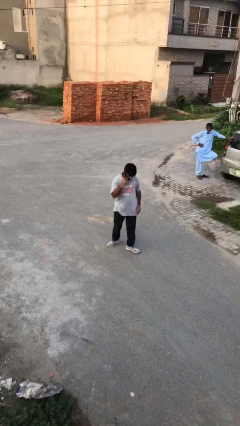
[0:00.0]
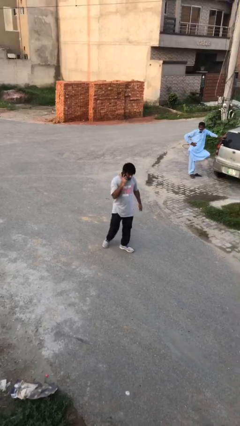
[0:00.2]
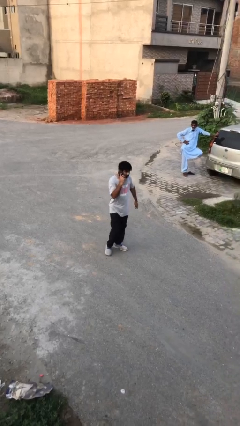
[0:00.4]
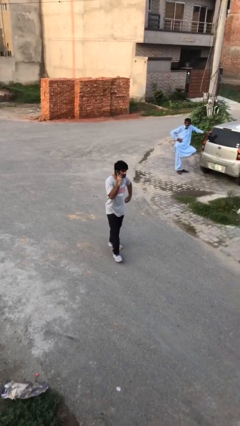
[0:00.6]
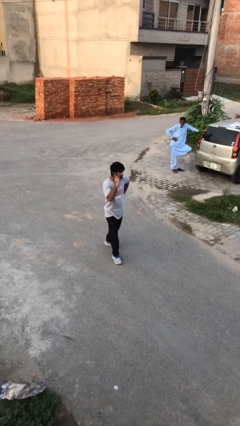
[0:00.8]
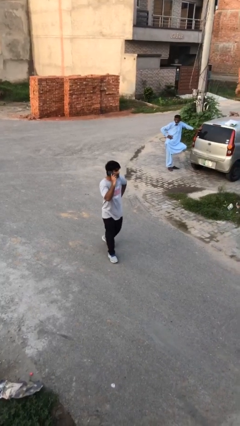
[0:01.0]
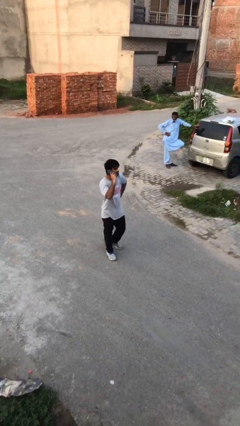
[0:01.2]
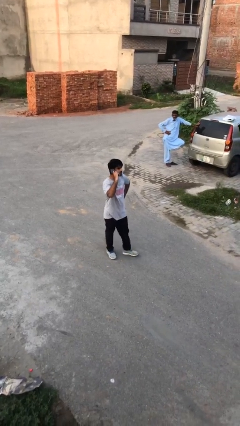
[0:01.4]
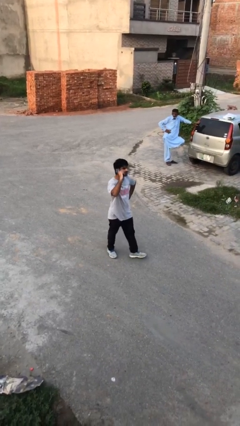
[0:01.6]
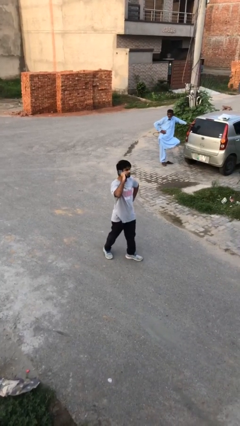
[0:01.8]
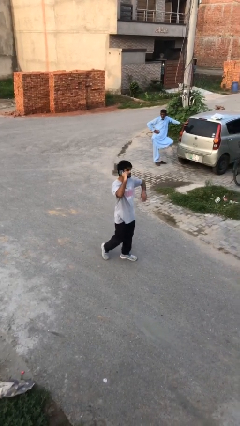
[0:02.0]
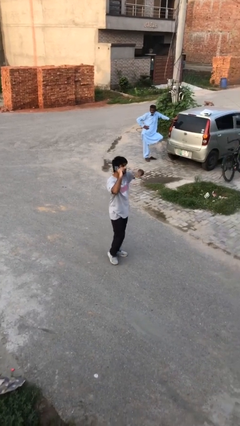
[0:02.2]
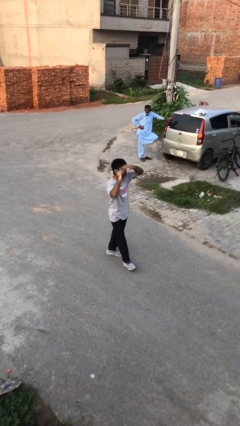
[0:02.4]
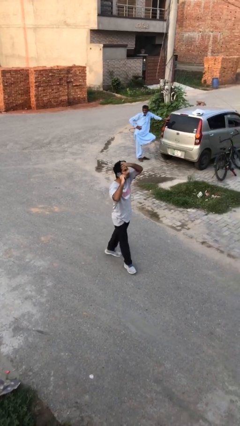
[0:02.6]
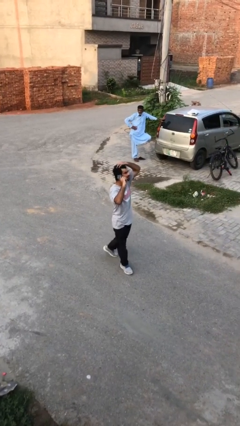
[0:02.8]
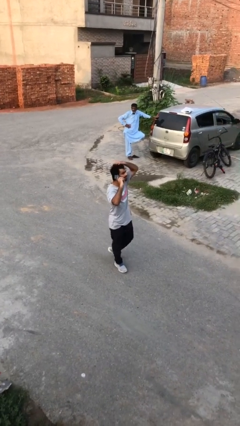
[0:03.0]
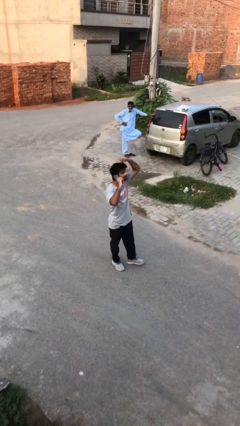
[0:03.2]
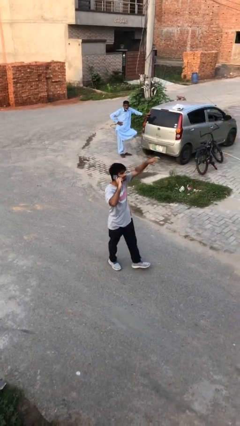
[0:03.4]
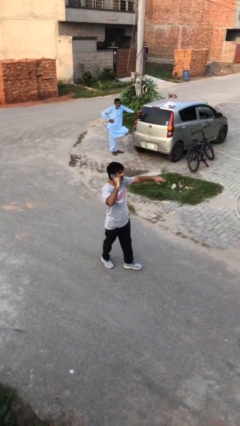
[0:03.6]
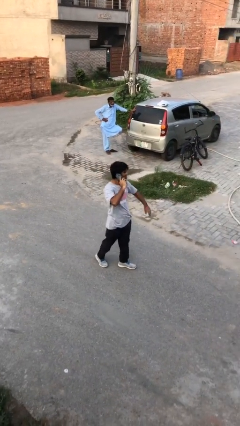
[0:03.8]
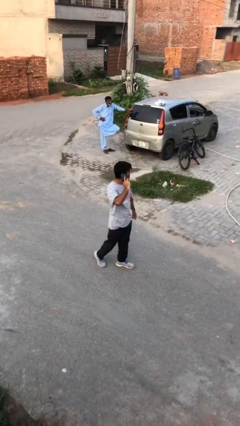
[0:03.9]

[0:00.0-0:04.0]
person talks on phone

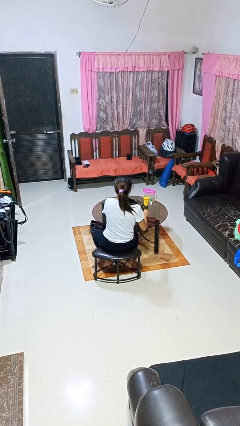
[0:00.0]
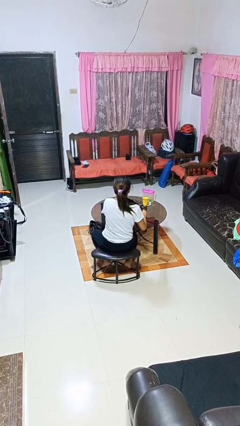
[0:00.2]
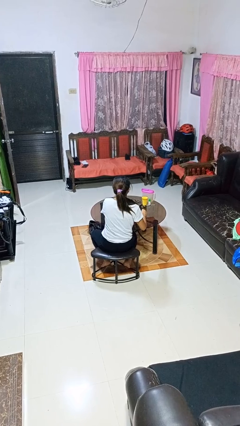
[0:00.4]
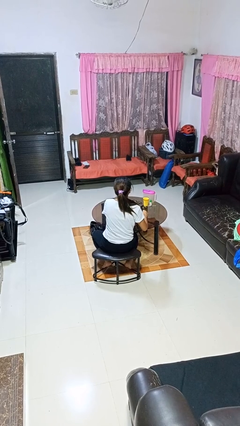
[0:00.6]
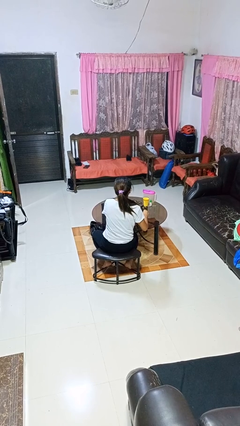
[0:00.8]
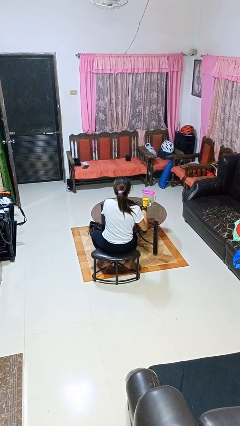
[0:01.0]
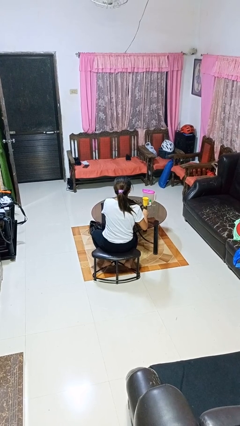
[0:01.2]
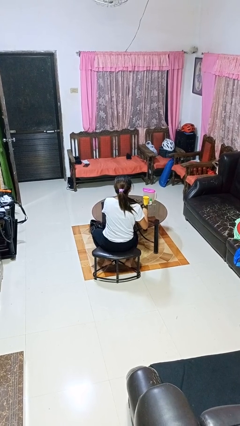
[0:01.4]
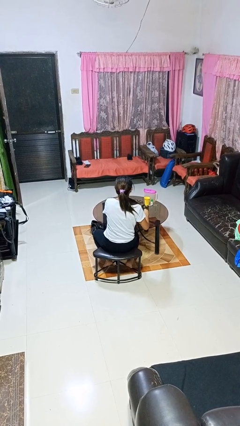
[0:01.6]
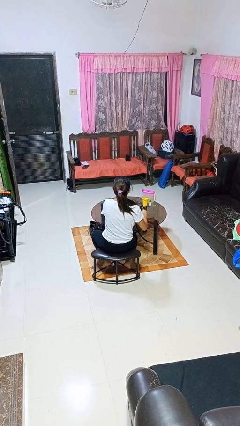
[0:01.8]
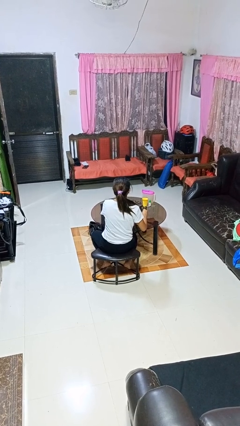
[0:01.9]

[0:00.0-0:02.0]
person stirs mug

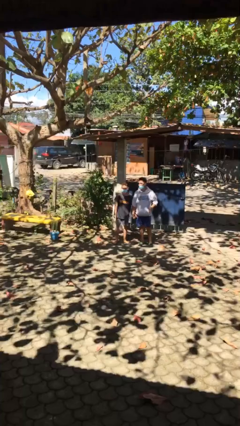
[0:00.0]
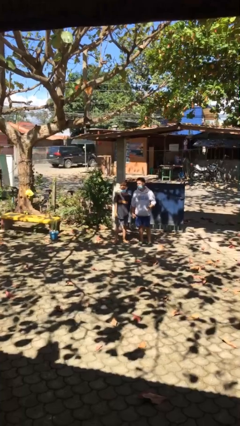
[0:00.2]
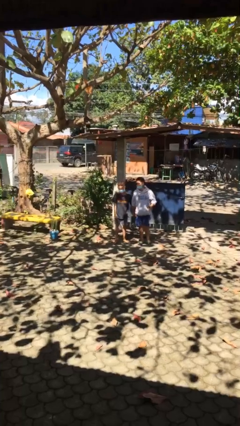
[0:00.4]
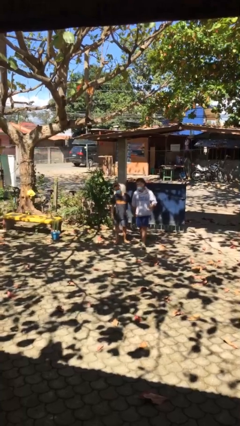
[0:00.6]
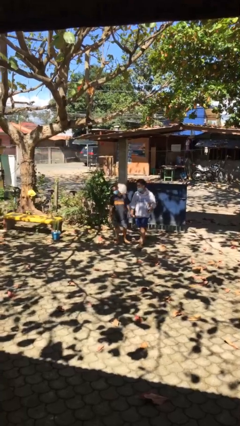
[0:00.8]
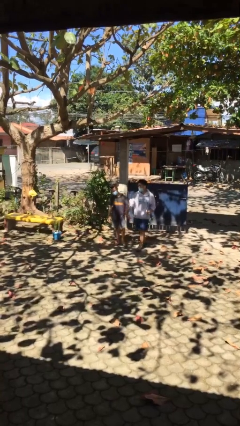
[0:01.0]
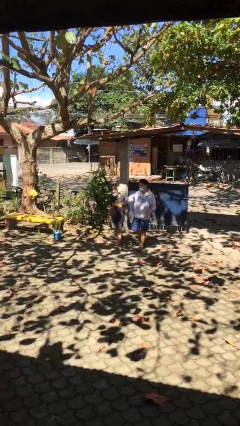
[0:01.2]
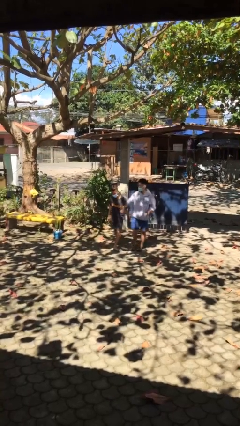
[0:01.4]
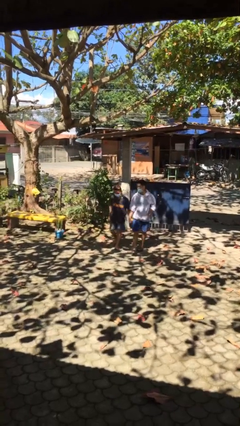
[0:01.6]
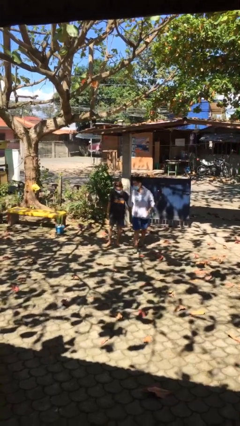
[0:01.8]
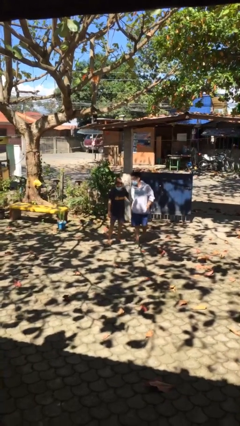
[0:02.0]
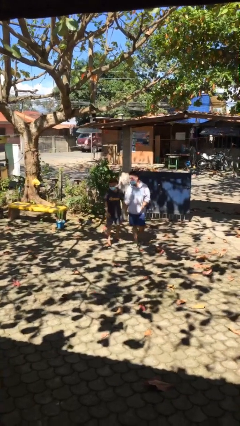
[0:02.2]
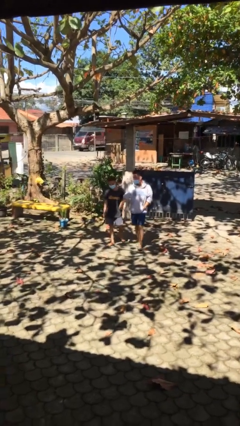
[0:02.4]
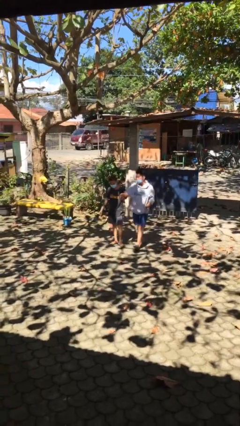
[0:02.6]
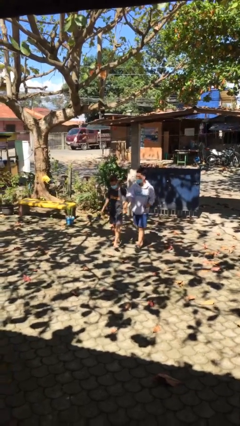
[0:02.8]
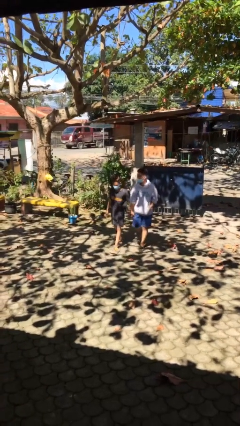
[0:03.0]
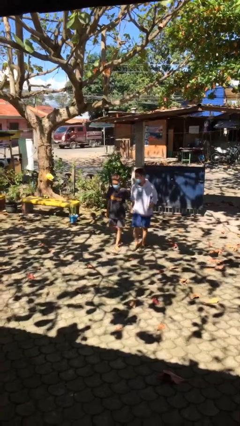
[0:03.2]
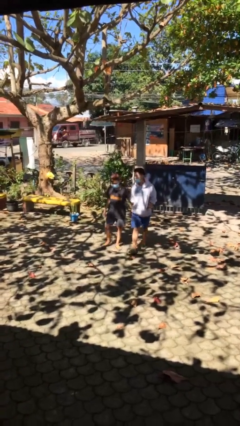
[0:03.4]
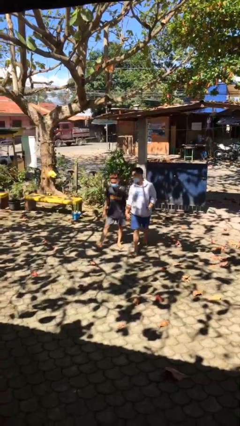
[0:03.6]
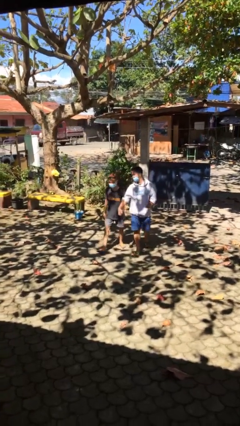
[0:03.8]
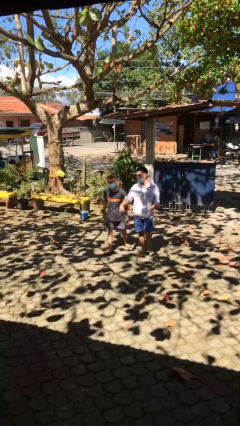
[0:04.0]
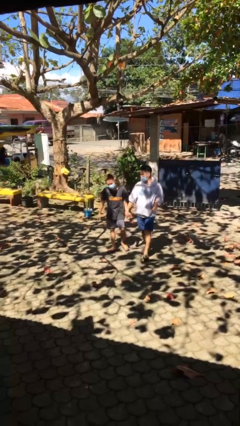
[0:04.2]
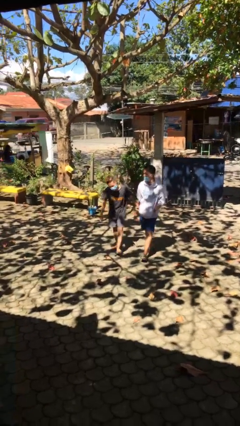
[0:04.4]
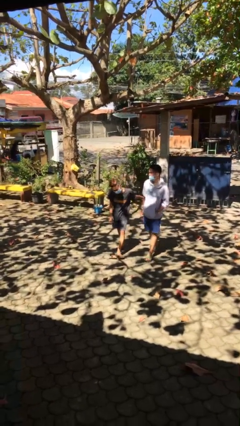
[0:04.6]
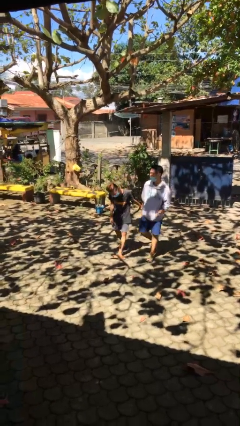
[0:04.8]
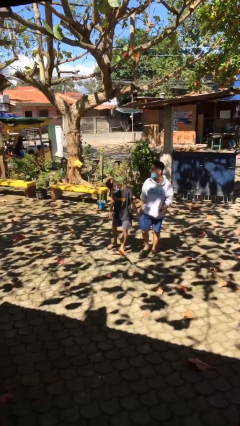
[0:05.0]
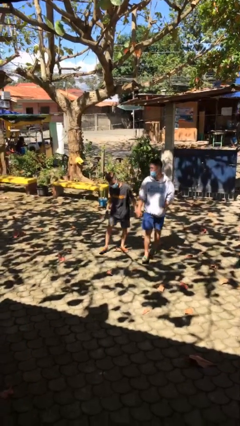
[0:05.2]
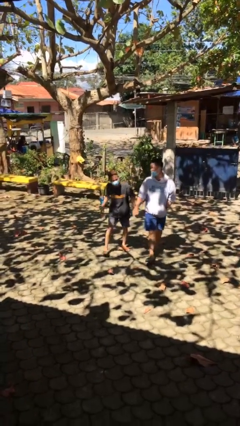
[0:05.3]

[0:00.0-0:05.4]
person holds hand

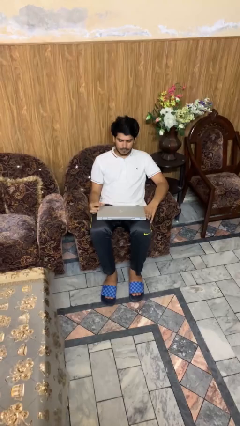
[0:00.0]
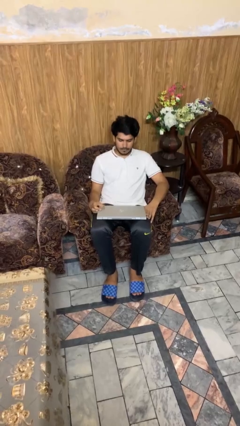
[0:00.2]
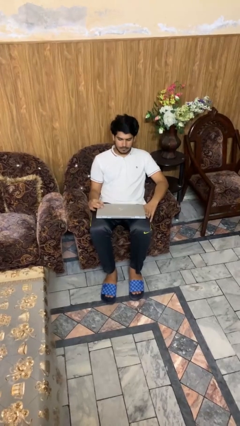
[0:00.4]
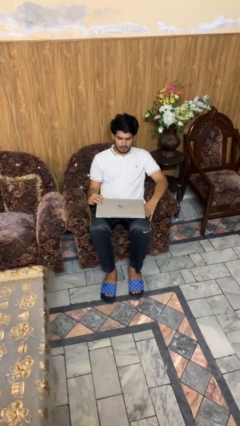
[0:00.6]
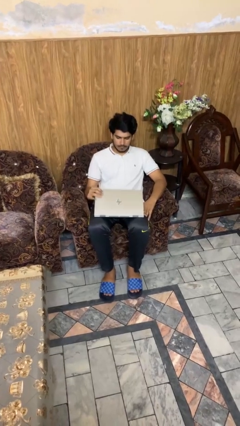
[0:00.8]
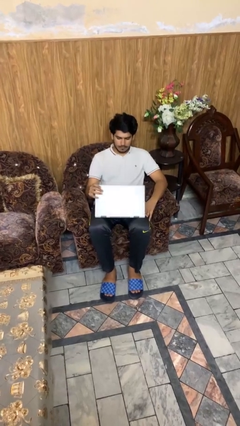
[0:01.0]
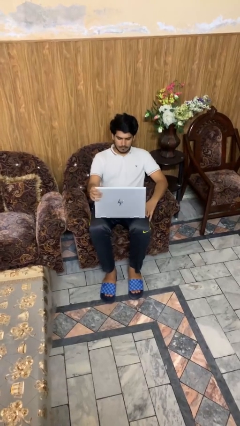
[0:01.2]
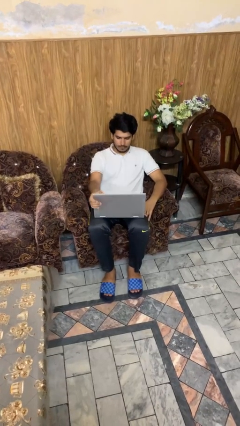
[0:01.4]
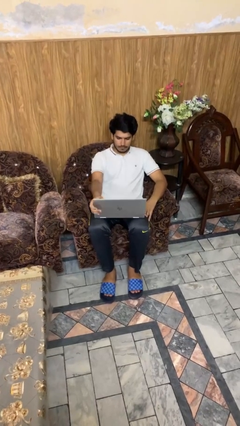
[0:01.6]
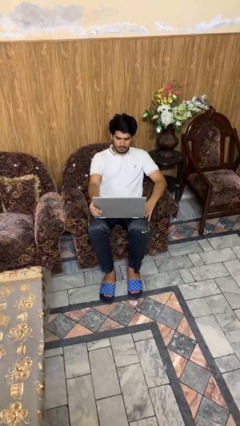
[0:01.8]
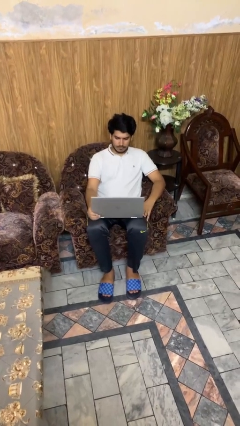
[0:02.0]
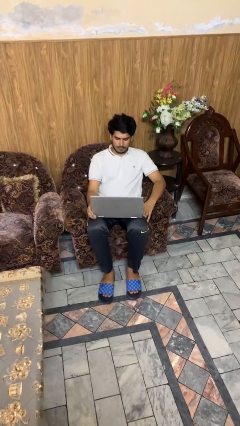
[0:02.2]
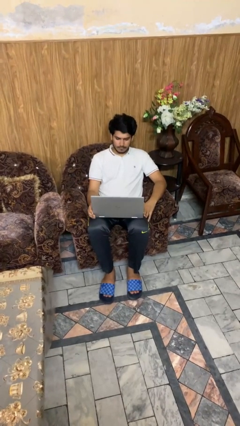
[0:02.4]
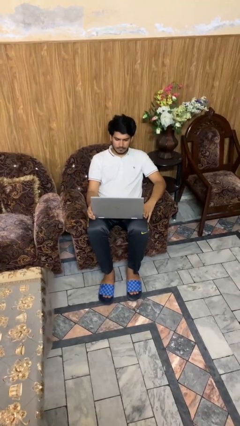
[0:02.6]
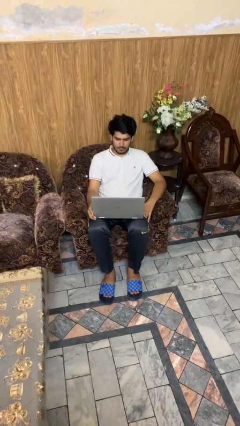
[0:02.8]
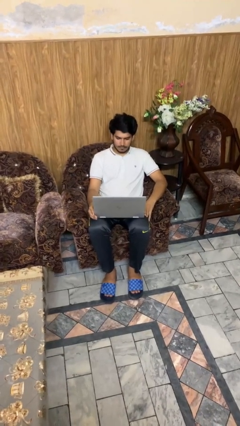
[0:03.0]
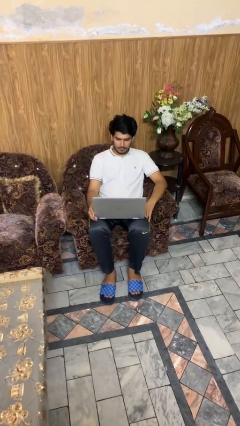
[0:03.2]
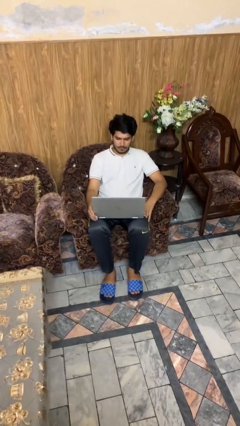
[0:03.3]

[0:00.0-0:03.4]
person opens laptop

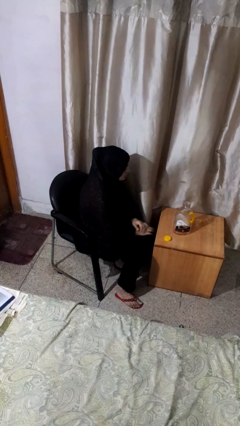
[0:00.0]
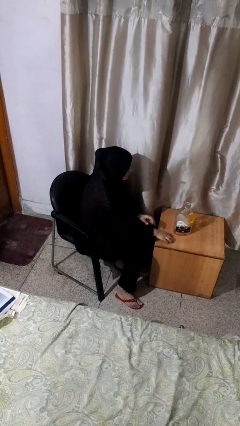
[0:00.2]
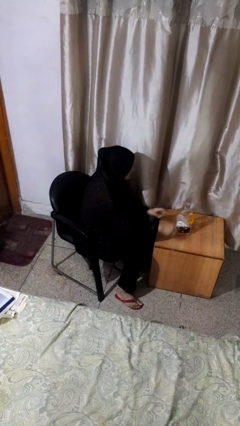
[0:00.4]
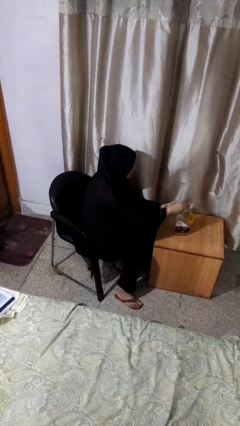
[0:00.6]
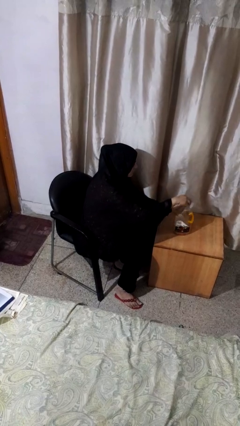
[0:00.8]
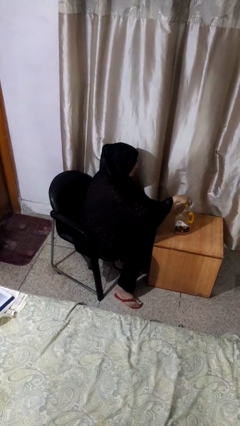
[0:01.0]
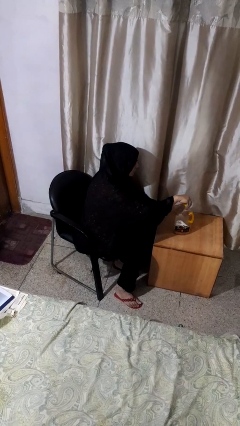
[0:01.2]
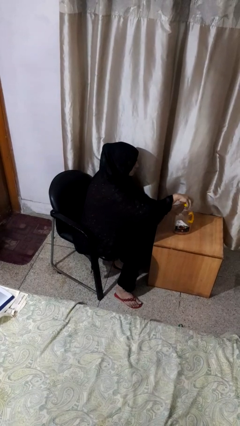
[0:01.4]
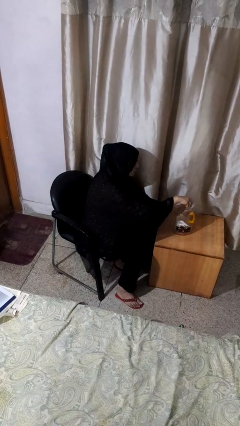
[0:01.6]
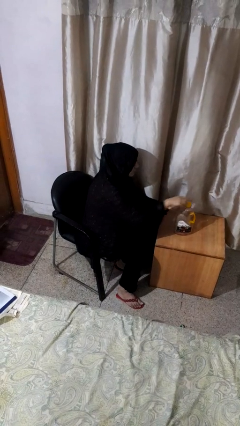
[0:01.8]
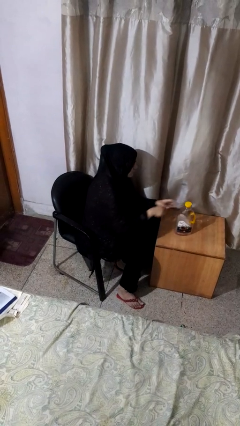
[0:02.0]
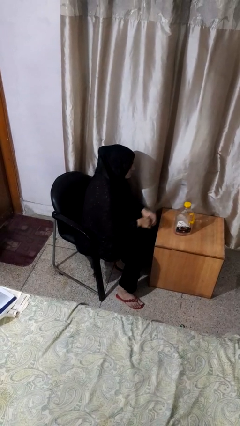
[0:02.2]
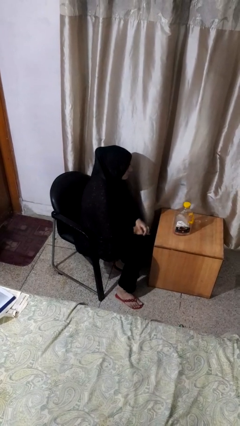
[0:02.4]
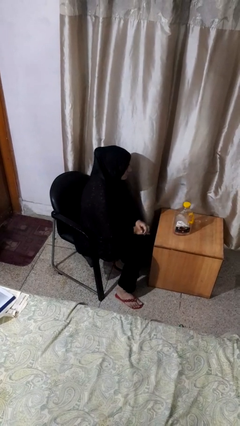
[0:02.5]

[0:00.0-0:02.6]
person screws lid to bottle

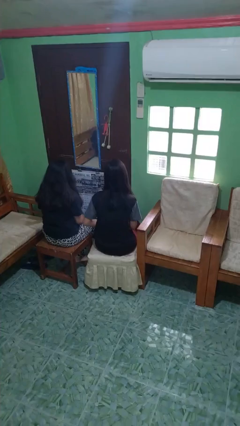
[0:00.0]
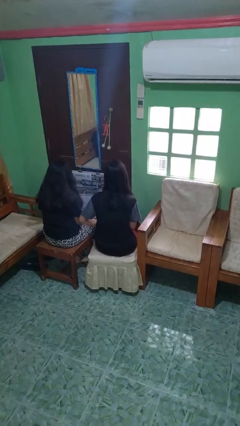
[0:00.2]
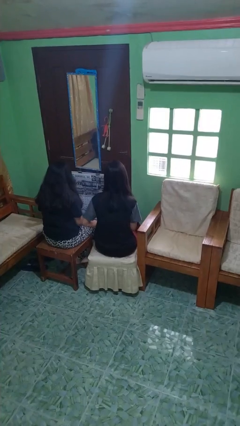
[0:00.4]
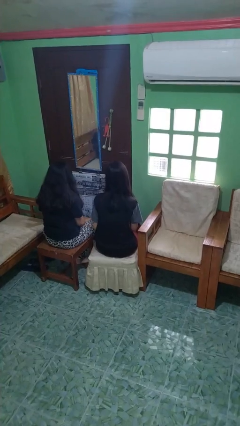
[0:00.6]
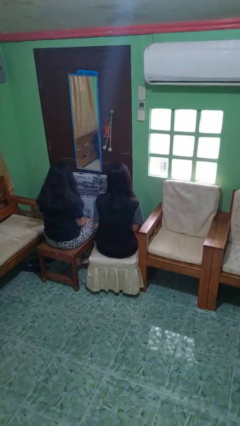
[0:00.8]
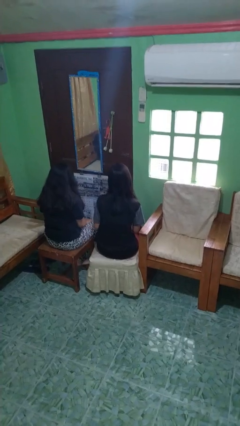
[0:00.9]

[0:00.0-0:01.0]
person nudges person with elbow
